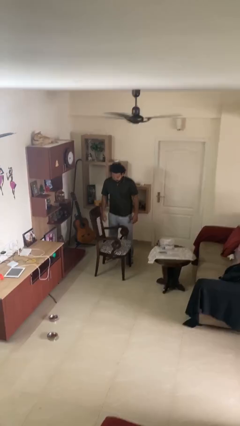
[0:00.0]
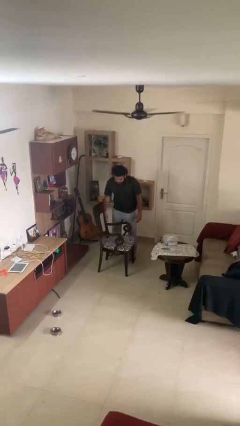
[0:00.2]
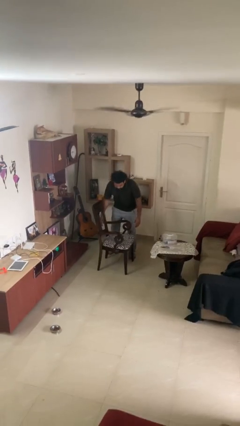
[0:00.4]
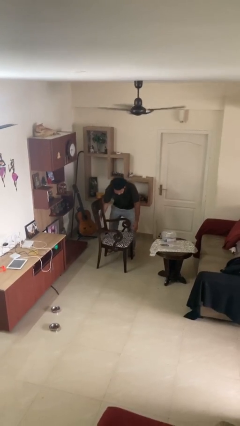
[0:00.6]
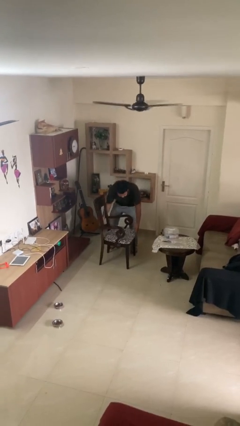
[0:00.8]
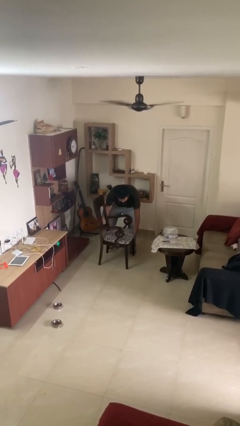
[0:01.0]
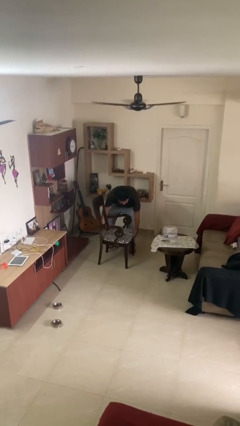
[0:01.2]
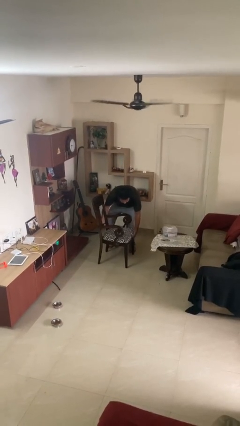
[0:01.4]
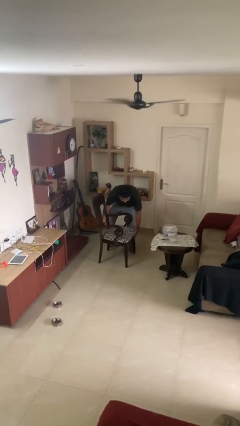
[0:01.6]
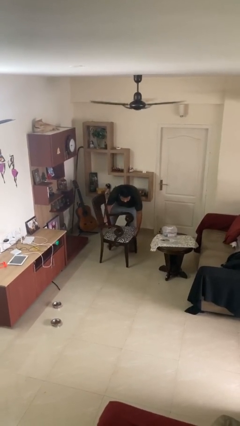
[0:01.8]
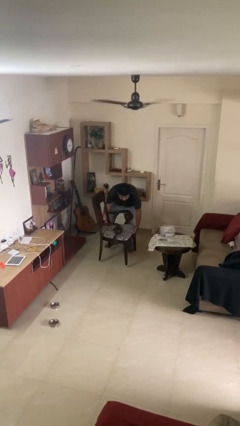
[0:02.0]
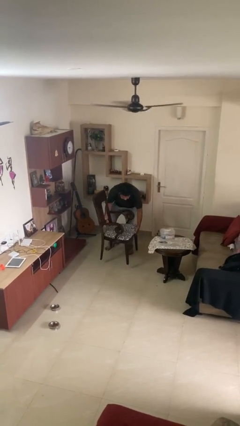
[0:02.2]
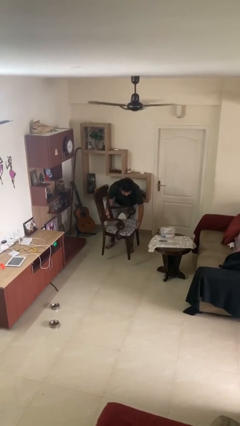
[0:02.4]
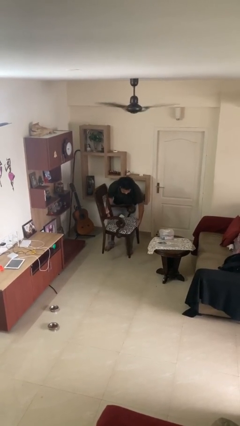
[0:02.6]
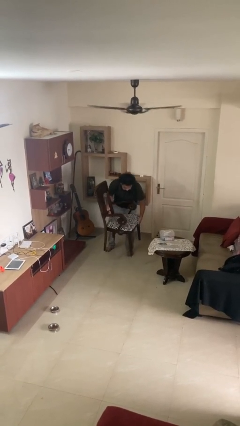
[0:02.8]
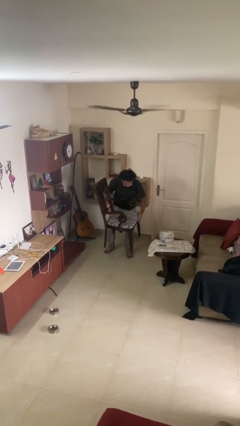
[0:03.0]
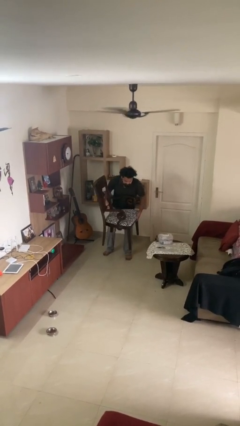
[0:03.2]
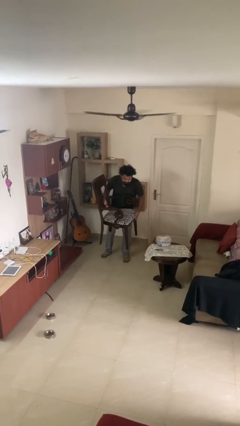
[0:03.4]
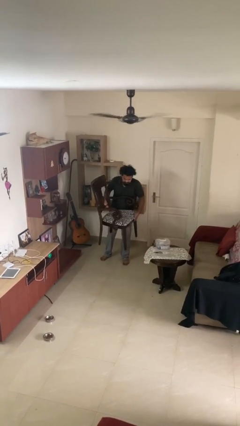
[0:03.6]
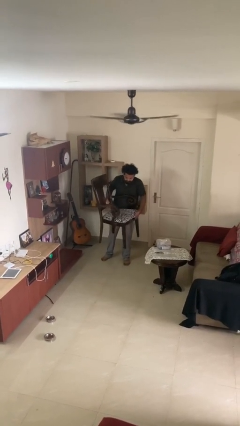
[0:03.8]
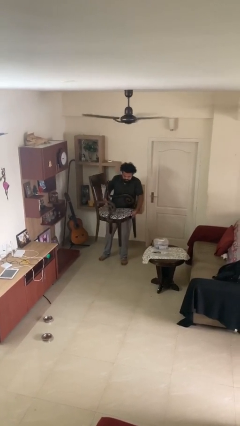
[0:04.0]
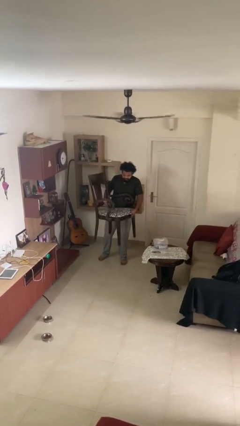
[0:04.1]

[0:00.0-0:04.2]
person picks up object from floor

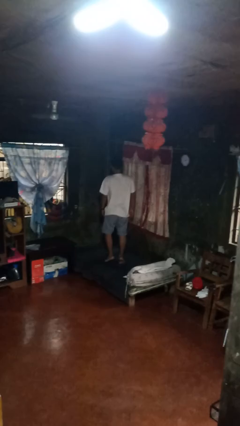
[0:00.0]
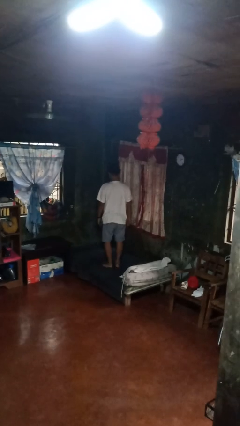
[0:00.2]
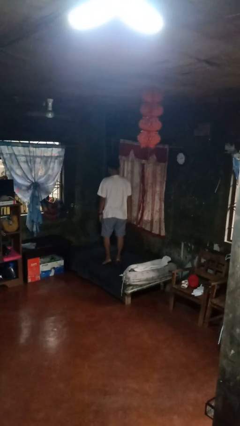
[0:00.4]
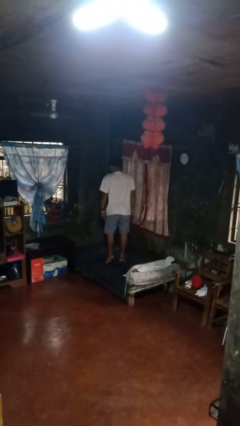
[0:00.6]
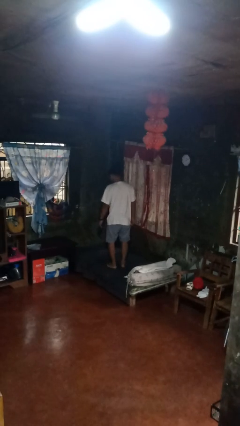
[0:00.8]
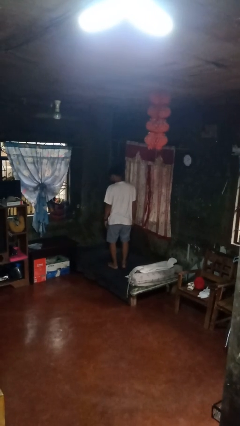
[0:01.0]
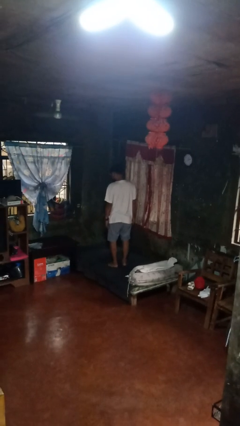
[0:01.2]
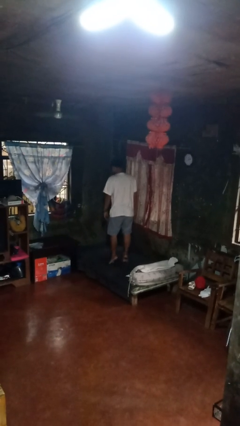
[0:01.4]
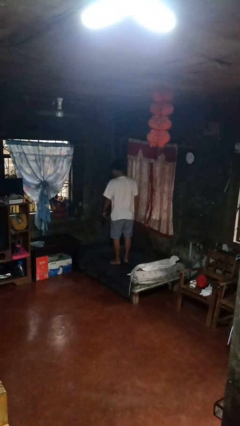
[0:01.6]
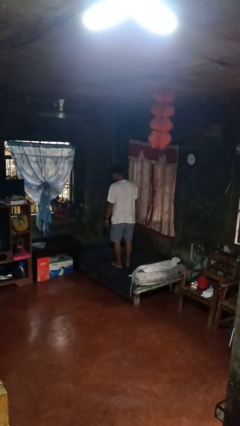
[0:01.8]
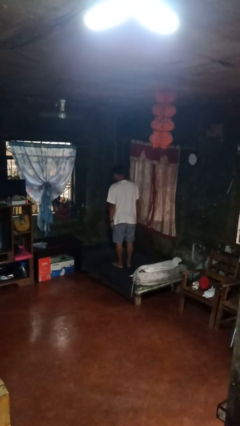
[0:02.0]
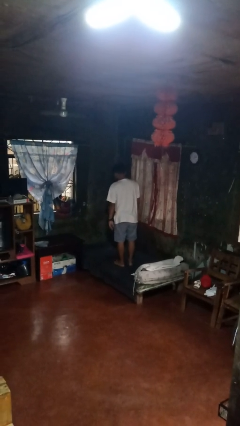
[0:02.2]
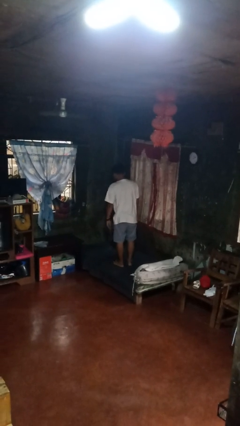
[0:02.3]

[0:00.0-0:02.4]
person jumps on bed

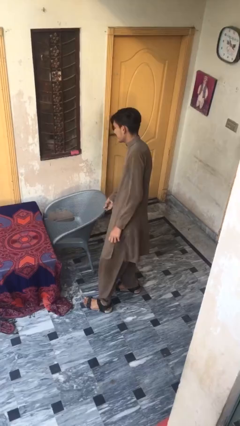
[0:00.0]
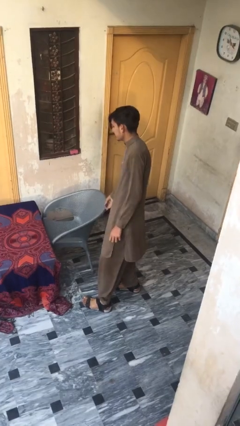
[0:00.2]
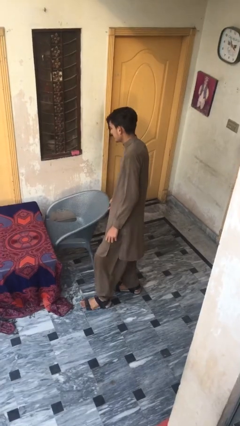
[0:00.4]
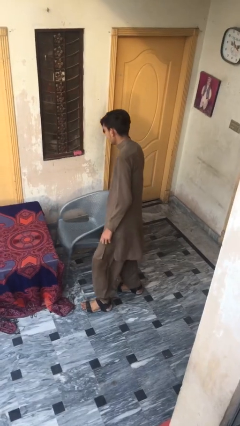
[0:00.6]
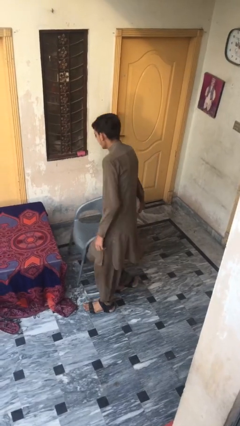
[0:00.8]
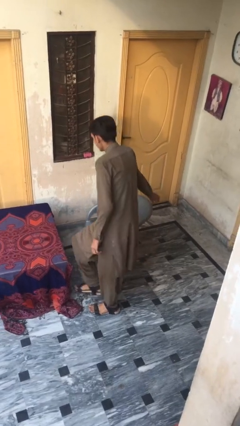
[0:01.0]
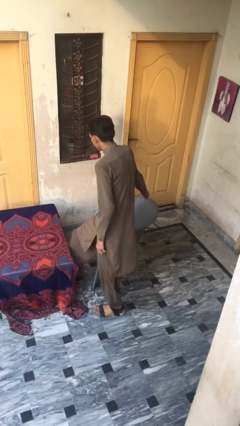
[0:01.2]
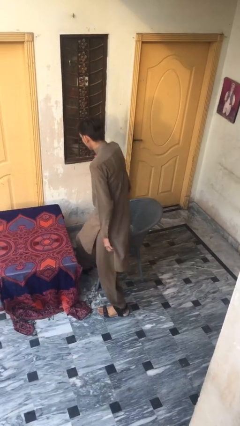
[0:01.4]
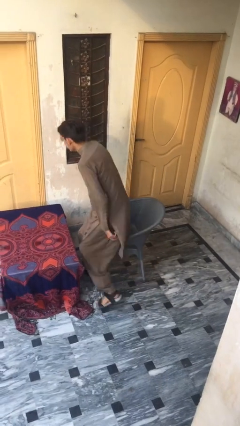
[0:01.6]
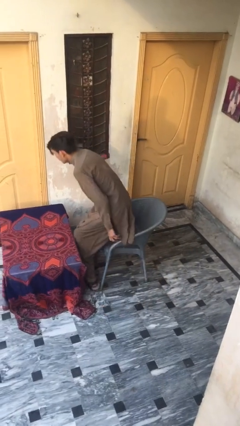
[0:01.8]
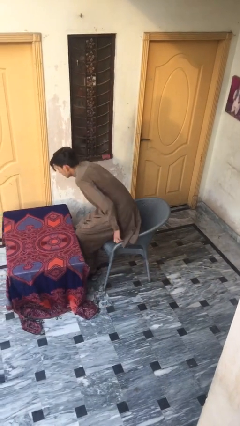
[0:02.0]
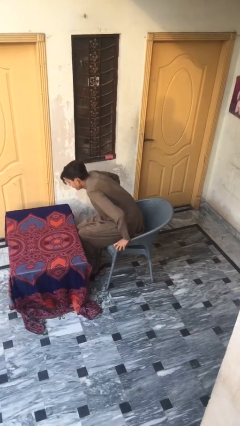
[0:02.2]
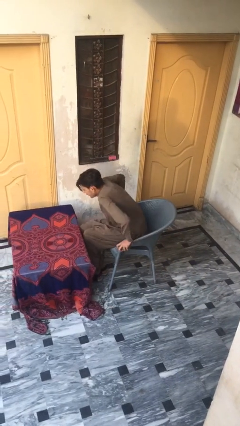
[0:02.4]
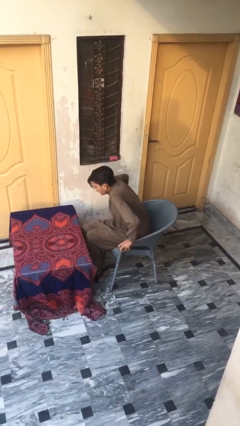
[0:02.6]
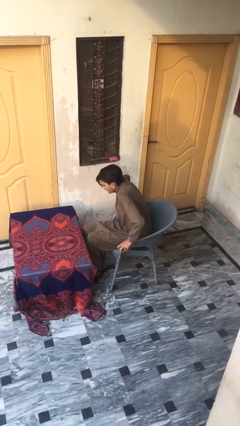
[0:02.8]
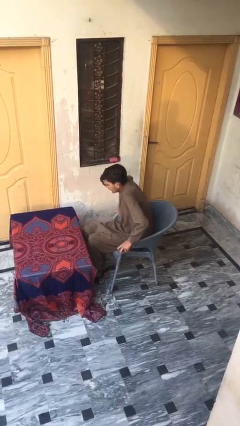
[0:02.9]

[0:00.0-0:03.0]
person sits down

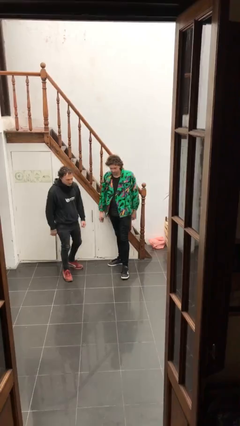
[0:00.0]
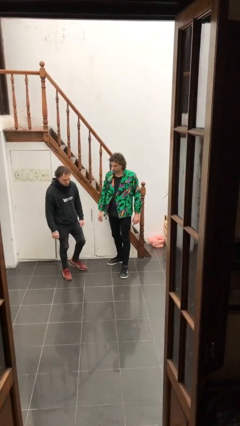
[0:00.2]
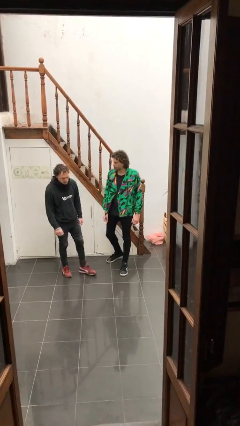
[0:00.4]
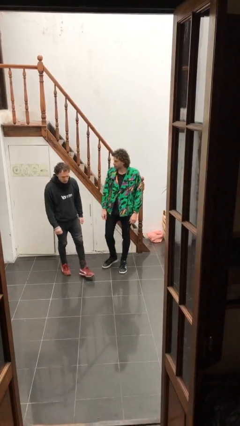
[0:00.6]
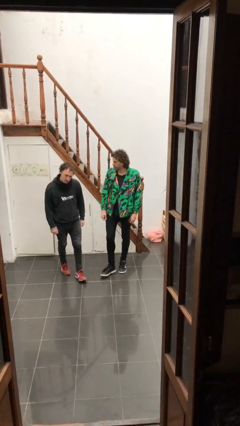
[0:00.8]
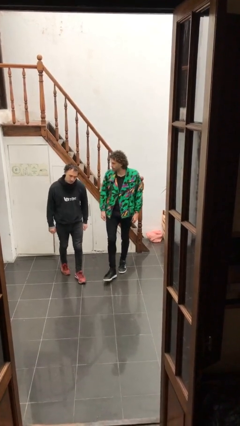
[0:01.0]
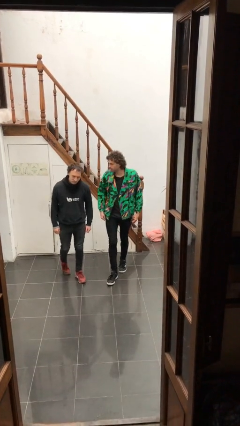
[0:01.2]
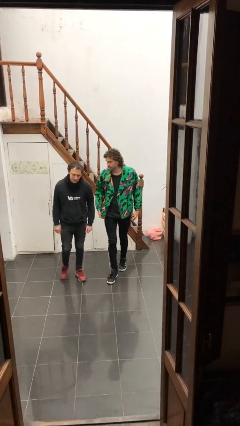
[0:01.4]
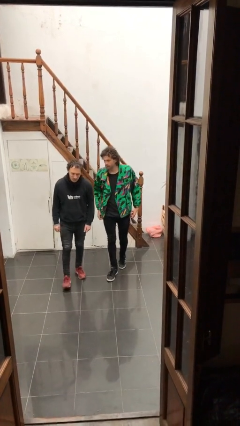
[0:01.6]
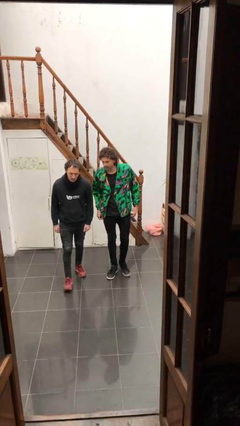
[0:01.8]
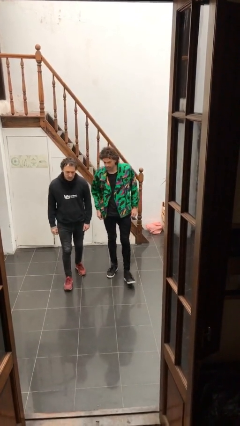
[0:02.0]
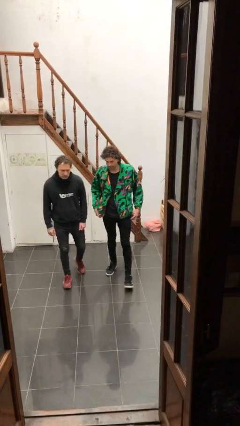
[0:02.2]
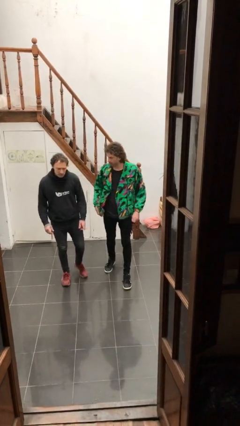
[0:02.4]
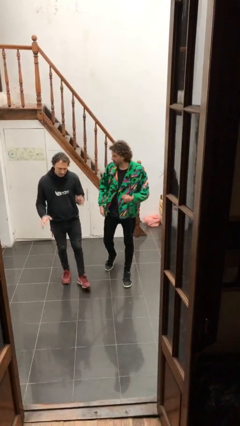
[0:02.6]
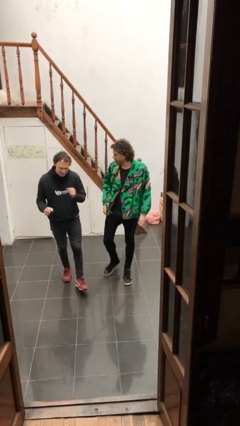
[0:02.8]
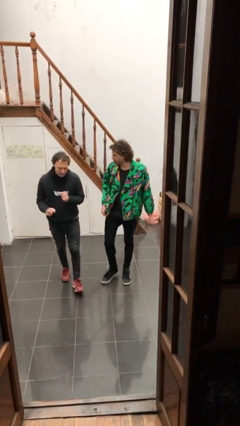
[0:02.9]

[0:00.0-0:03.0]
person talks to person

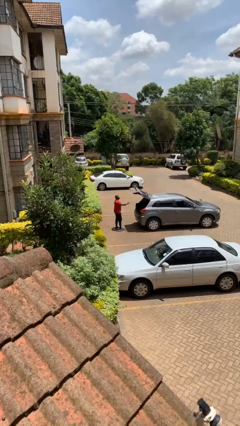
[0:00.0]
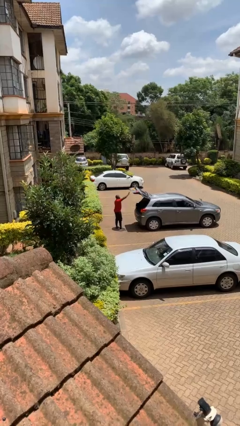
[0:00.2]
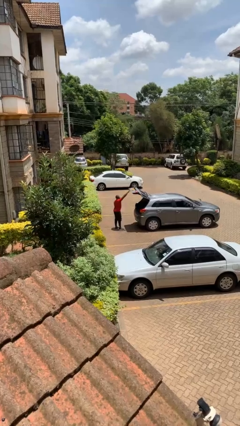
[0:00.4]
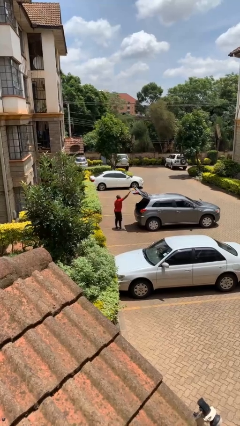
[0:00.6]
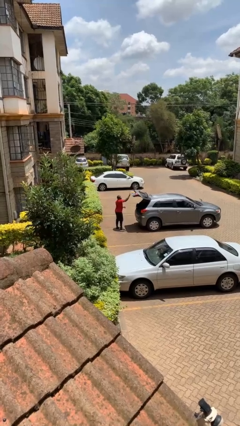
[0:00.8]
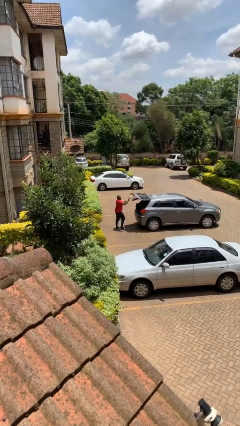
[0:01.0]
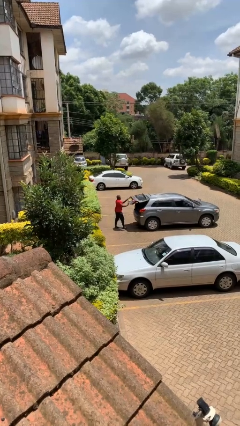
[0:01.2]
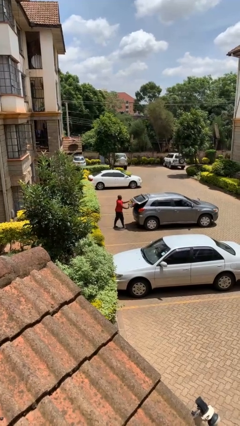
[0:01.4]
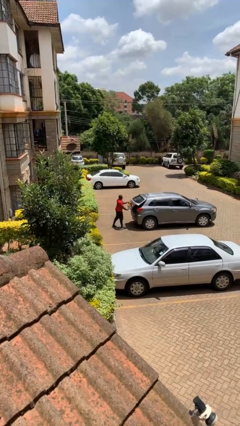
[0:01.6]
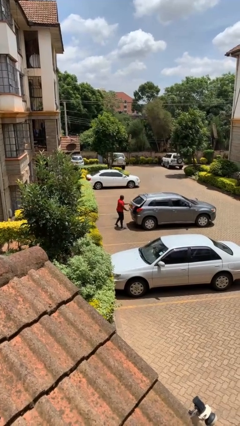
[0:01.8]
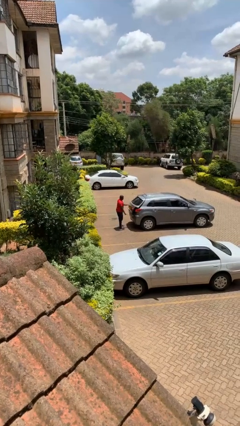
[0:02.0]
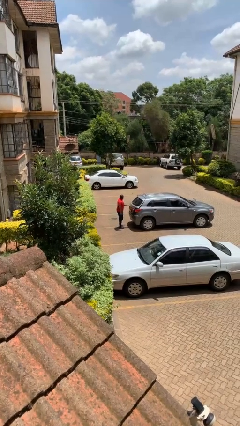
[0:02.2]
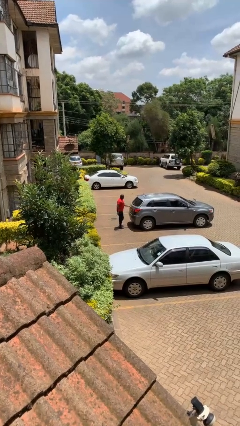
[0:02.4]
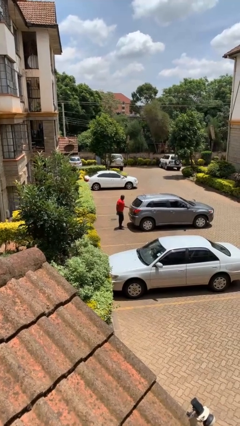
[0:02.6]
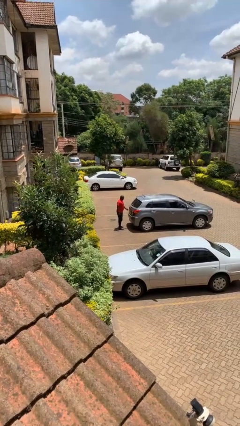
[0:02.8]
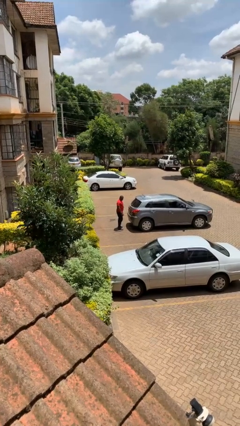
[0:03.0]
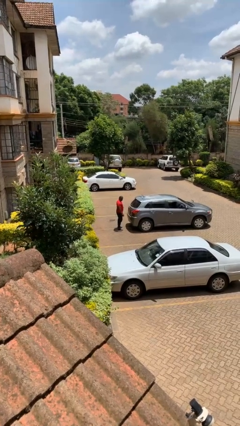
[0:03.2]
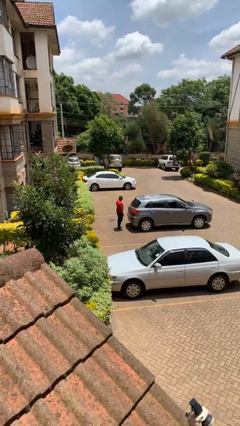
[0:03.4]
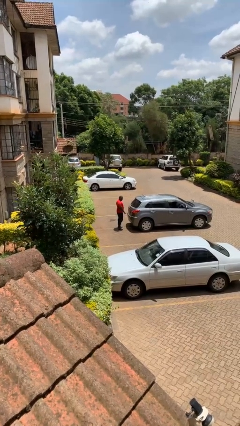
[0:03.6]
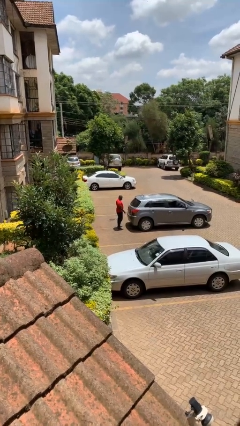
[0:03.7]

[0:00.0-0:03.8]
person closes car trunk

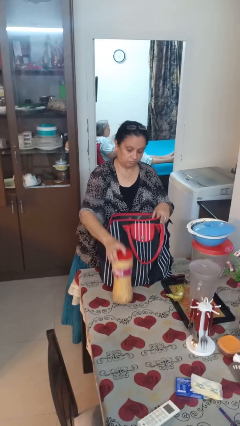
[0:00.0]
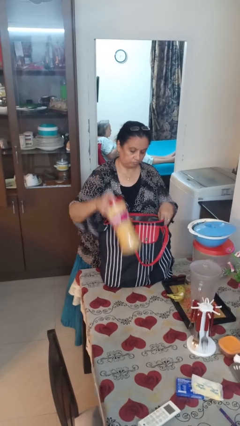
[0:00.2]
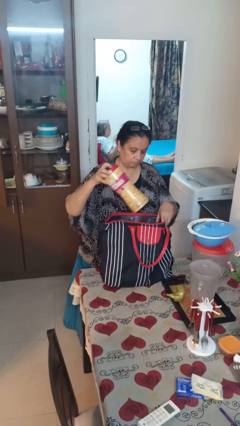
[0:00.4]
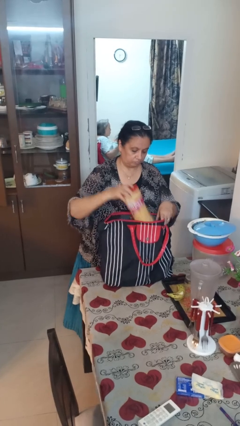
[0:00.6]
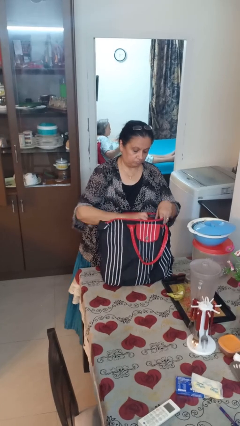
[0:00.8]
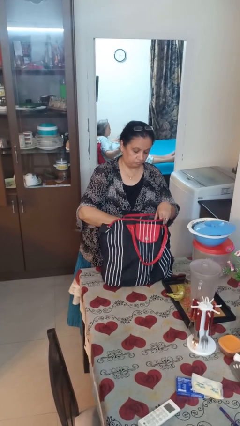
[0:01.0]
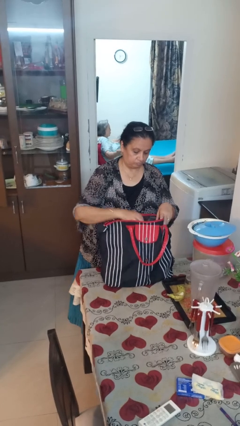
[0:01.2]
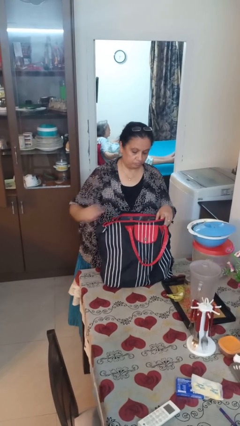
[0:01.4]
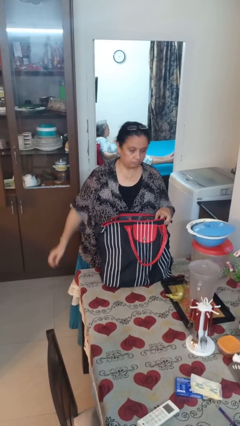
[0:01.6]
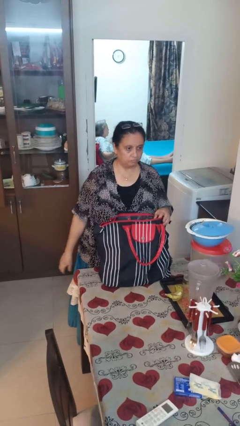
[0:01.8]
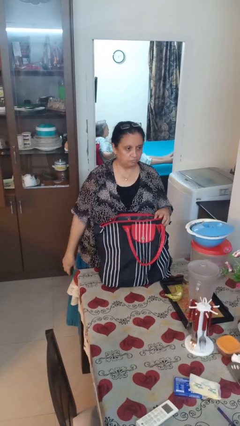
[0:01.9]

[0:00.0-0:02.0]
person puts object into bag
